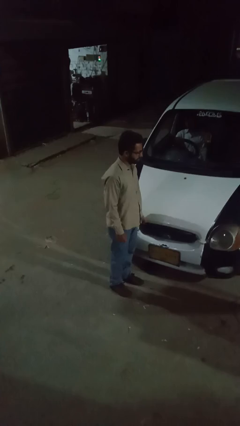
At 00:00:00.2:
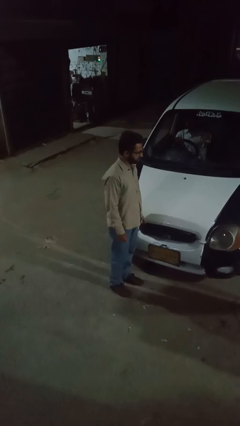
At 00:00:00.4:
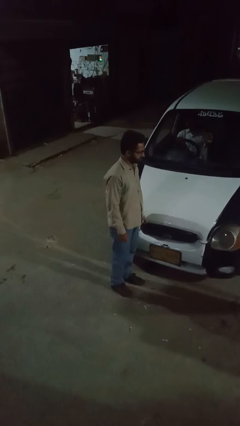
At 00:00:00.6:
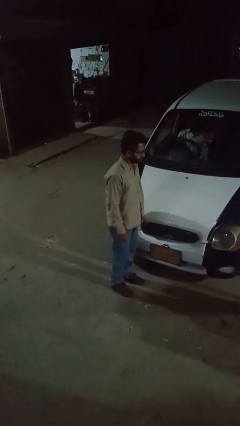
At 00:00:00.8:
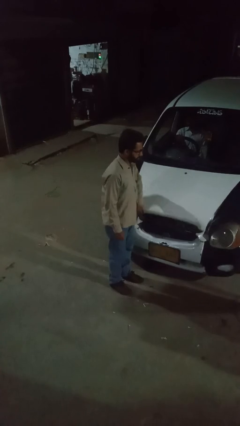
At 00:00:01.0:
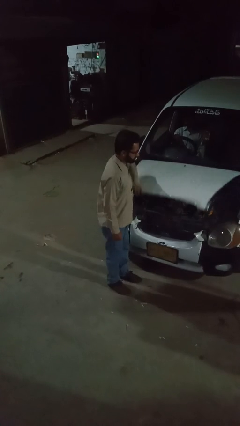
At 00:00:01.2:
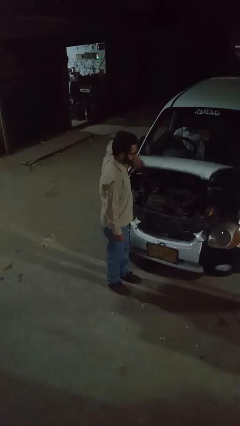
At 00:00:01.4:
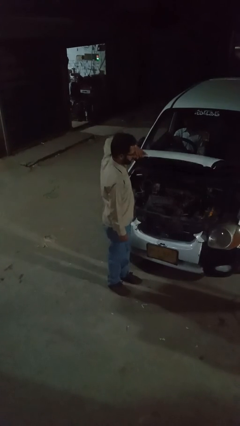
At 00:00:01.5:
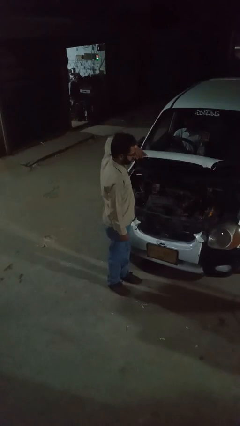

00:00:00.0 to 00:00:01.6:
person opens car hood

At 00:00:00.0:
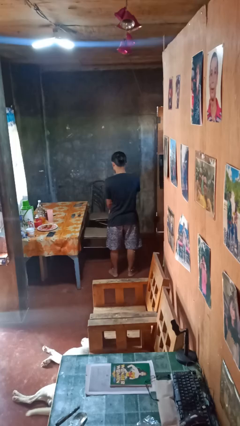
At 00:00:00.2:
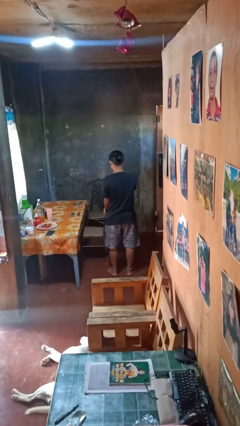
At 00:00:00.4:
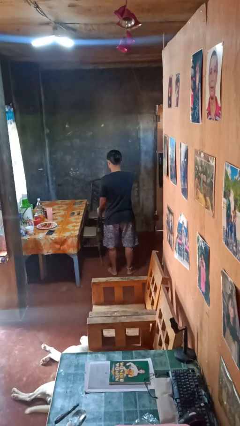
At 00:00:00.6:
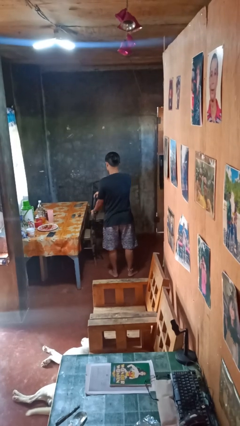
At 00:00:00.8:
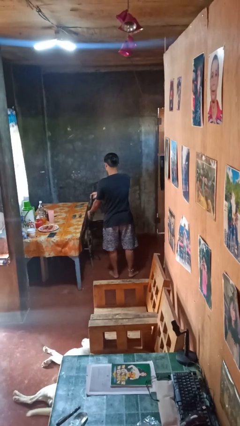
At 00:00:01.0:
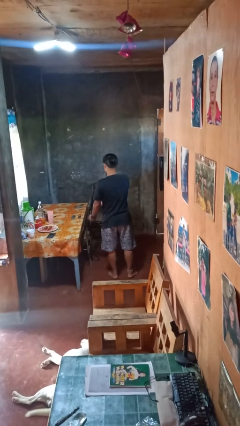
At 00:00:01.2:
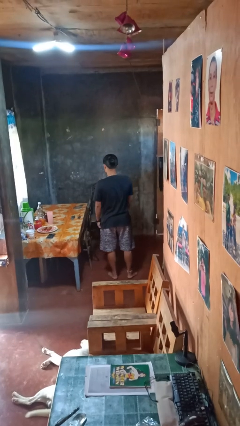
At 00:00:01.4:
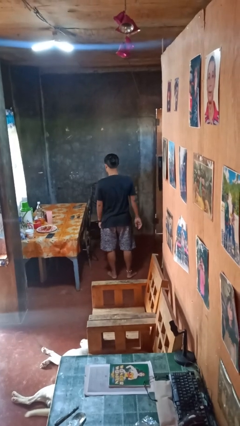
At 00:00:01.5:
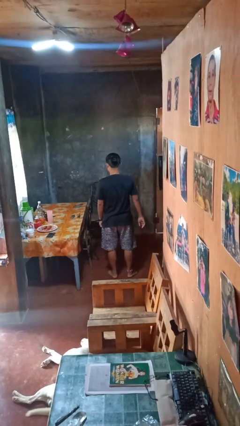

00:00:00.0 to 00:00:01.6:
person pushes in chair

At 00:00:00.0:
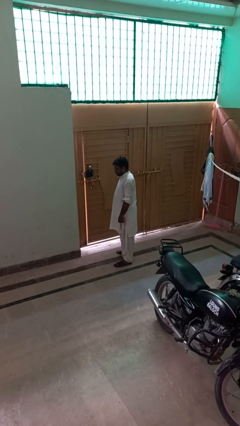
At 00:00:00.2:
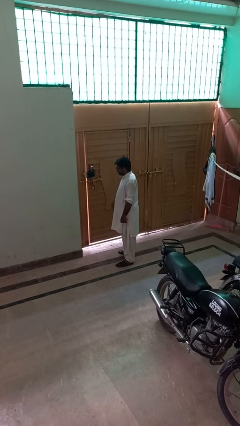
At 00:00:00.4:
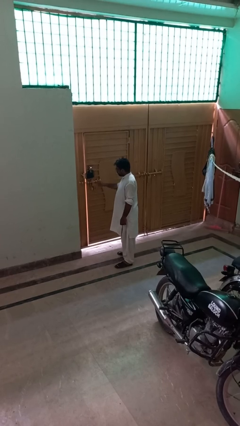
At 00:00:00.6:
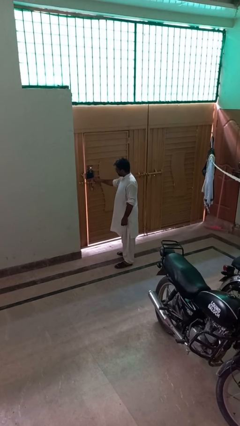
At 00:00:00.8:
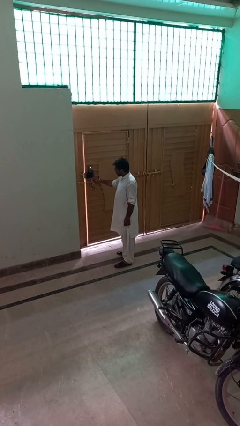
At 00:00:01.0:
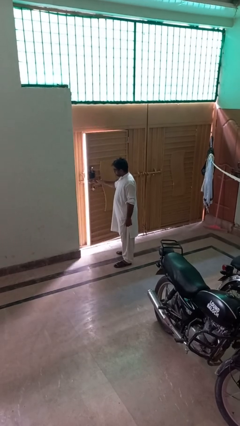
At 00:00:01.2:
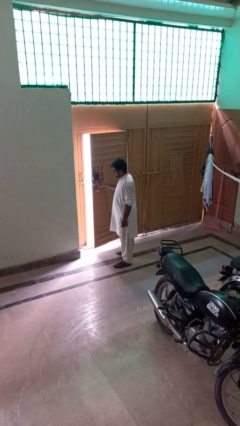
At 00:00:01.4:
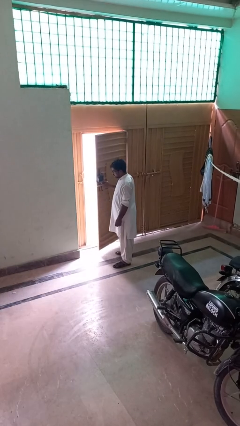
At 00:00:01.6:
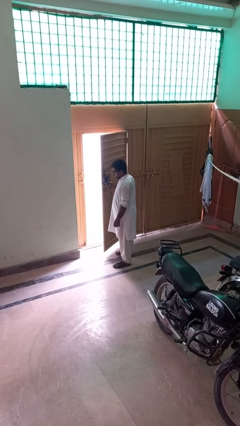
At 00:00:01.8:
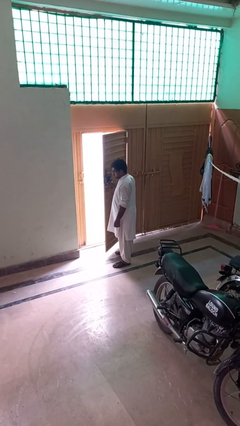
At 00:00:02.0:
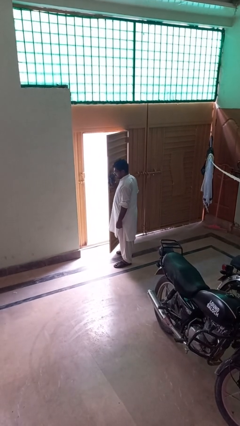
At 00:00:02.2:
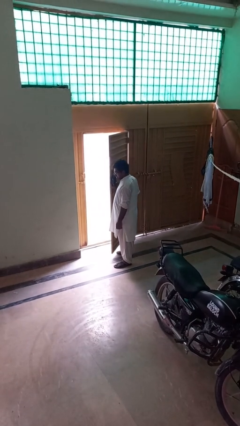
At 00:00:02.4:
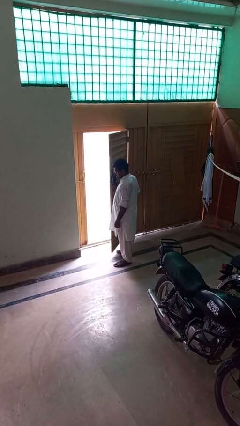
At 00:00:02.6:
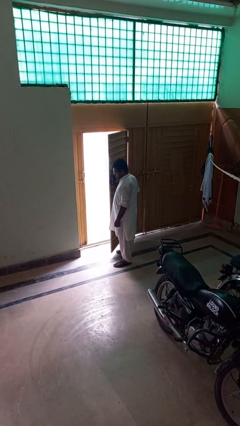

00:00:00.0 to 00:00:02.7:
person opens gate

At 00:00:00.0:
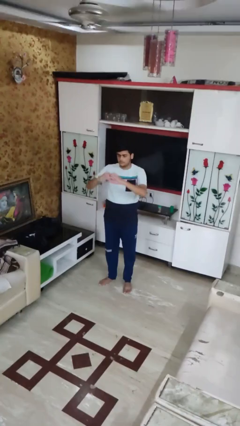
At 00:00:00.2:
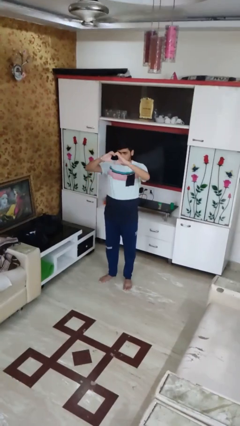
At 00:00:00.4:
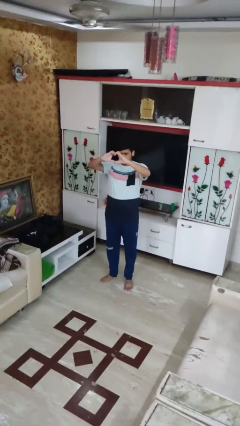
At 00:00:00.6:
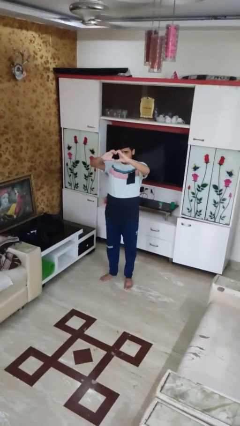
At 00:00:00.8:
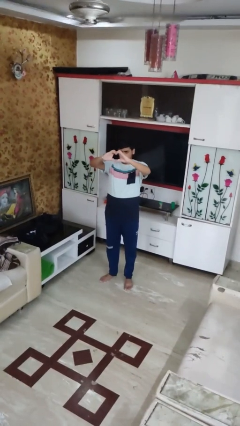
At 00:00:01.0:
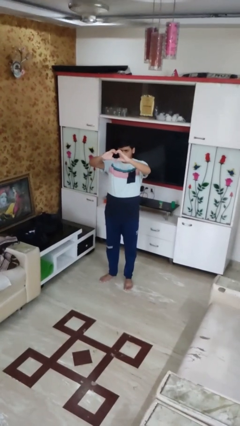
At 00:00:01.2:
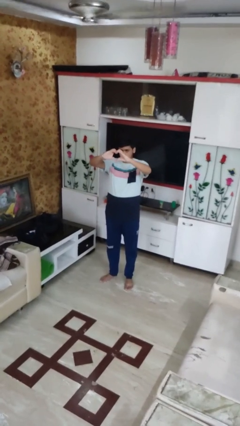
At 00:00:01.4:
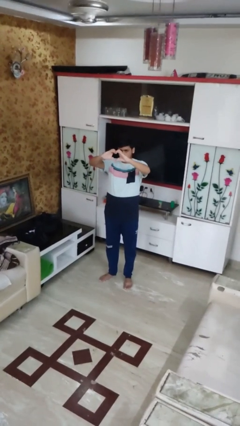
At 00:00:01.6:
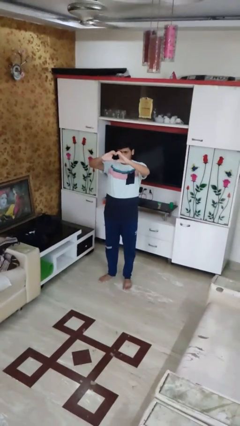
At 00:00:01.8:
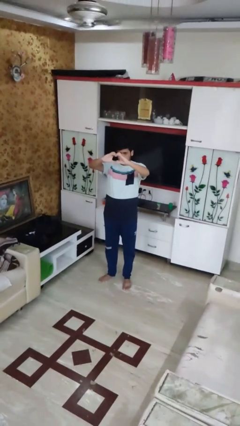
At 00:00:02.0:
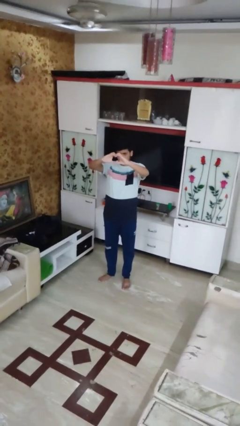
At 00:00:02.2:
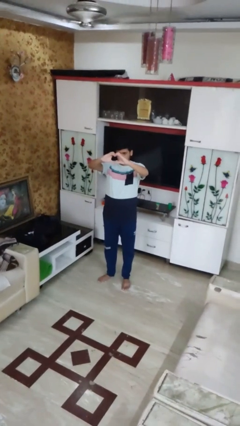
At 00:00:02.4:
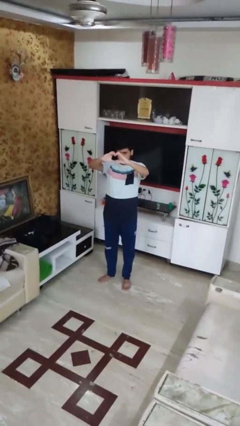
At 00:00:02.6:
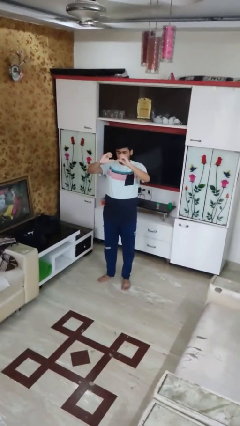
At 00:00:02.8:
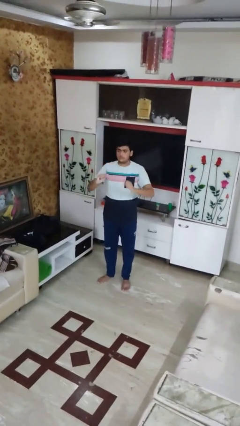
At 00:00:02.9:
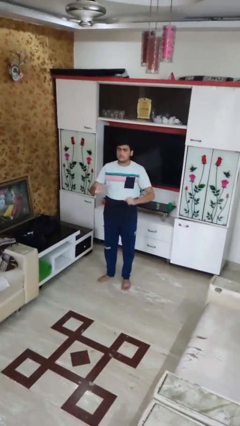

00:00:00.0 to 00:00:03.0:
person gestures heart

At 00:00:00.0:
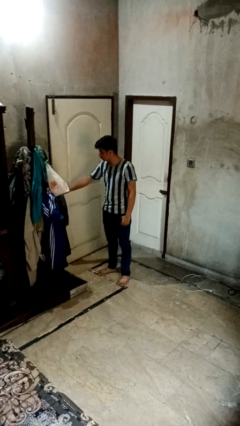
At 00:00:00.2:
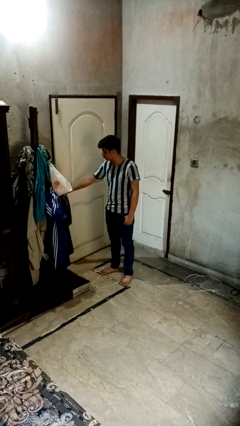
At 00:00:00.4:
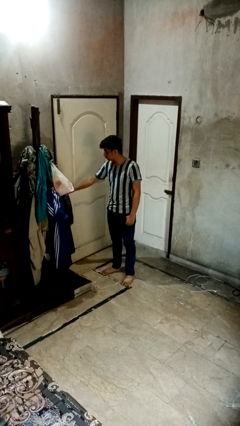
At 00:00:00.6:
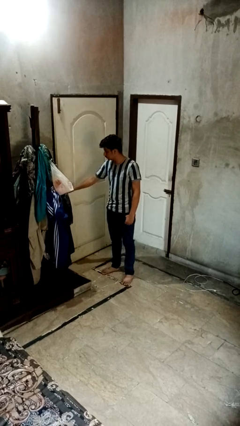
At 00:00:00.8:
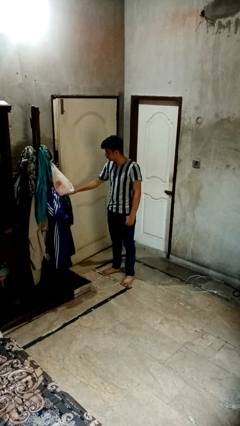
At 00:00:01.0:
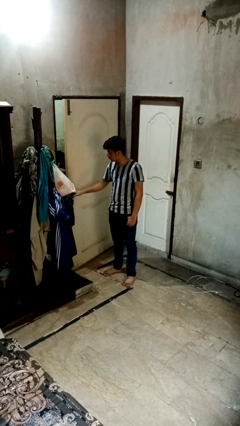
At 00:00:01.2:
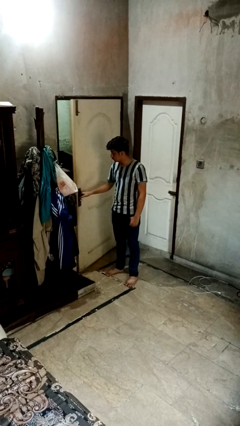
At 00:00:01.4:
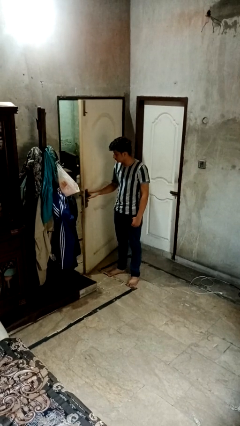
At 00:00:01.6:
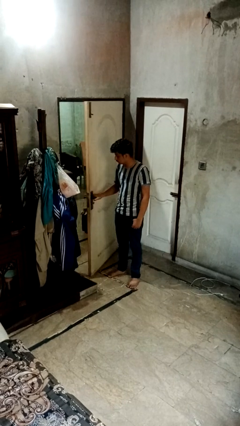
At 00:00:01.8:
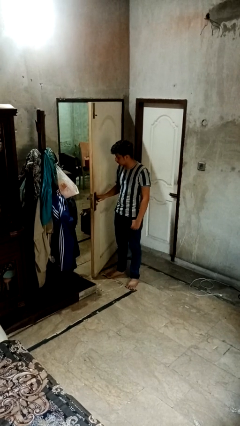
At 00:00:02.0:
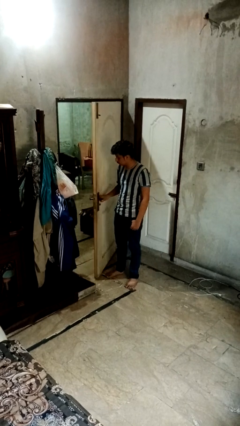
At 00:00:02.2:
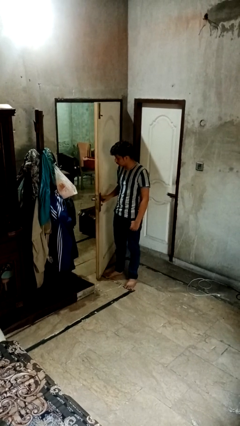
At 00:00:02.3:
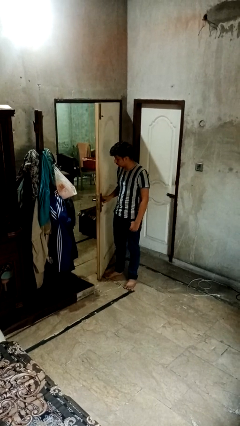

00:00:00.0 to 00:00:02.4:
person opens sliding door

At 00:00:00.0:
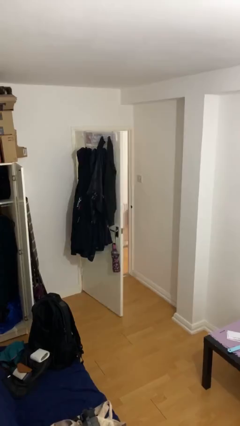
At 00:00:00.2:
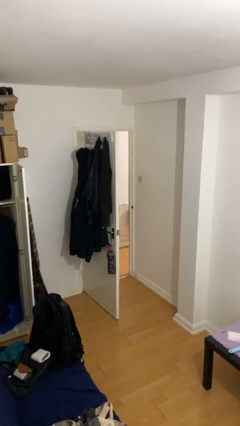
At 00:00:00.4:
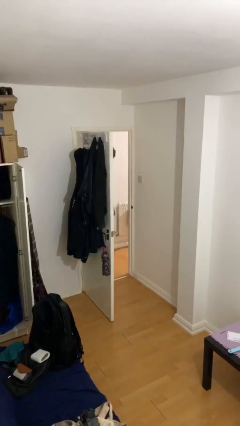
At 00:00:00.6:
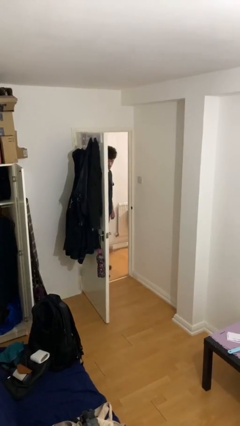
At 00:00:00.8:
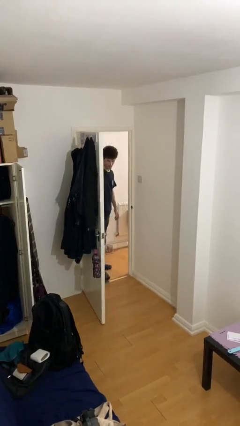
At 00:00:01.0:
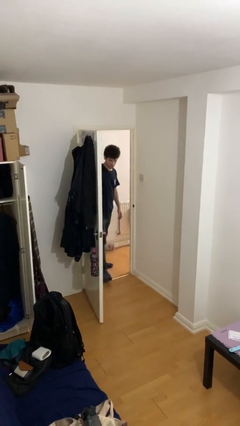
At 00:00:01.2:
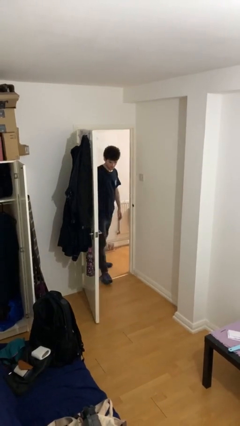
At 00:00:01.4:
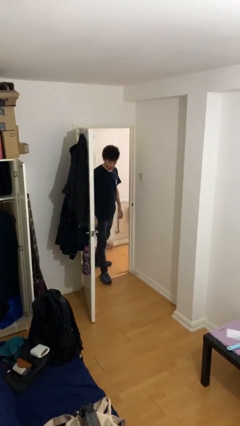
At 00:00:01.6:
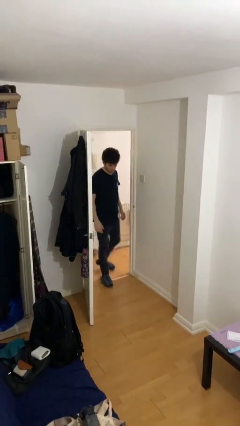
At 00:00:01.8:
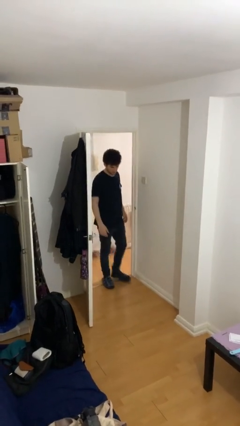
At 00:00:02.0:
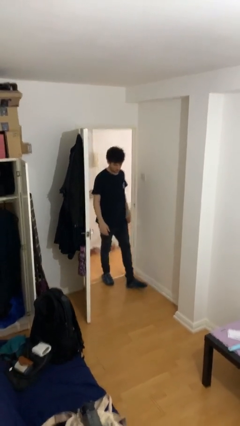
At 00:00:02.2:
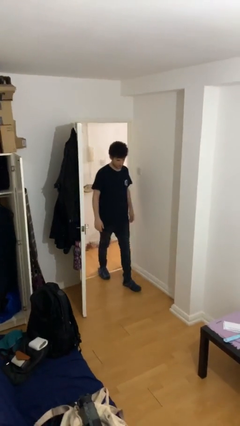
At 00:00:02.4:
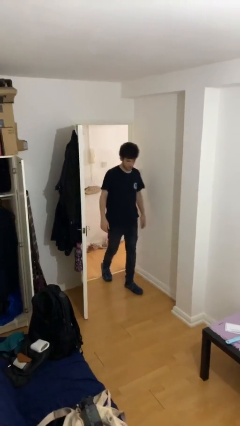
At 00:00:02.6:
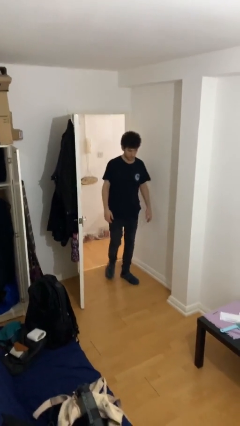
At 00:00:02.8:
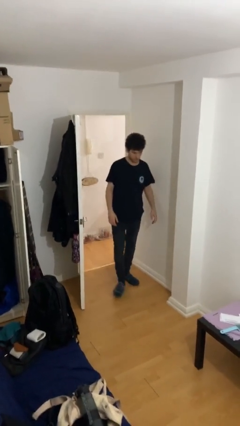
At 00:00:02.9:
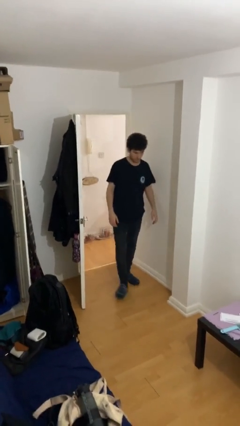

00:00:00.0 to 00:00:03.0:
person enters scene through structure

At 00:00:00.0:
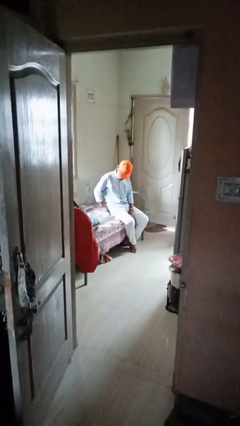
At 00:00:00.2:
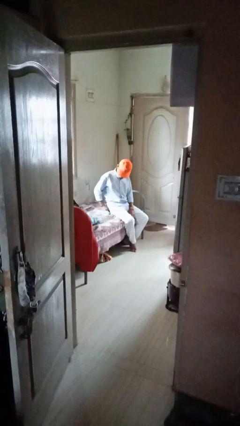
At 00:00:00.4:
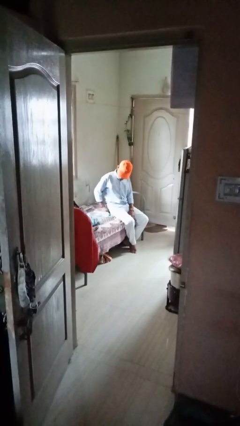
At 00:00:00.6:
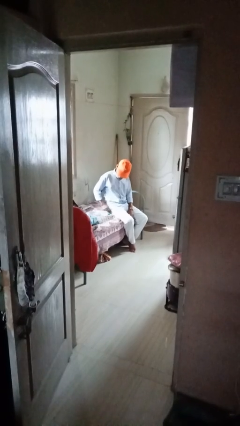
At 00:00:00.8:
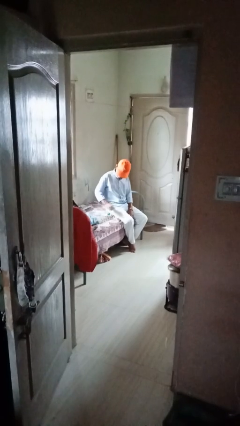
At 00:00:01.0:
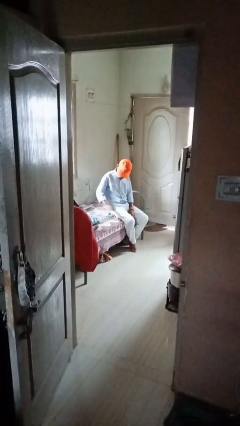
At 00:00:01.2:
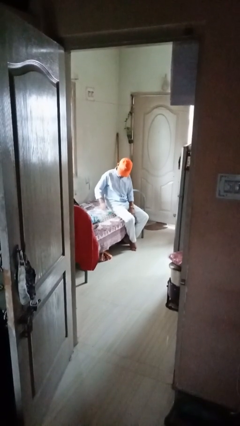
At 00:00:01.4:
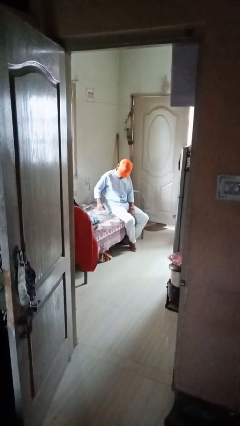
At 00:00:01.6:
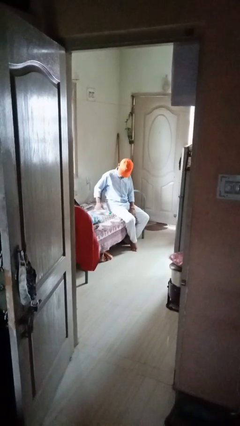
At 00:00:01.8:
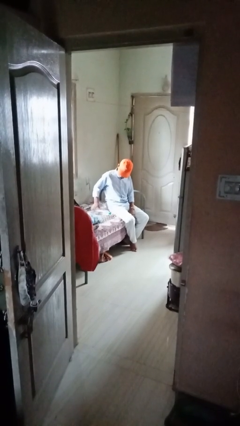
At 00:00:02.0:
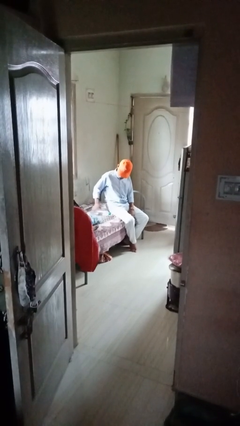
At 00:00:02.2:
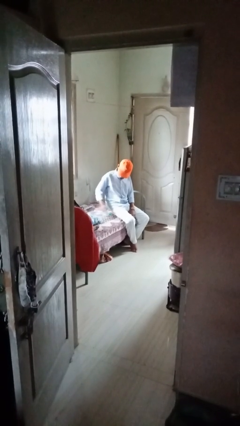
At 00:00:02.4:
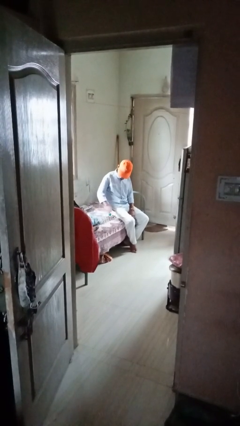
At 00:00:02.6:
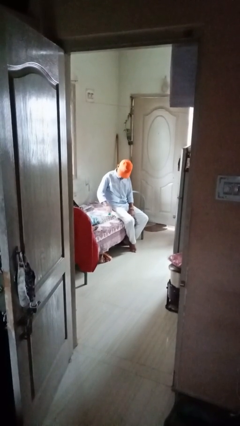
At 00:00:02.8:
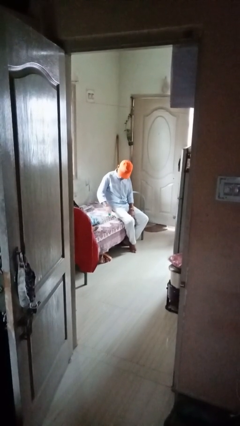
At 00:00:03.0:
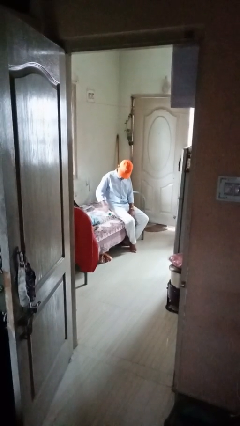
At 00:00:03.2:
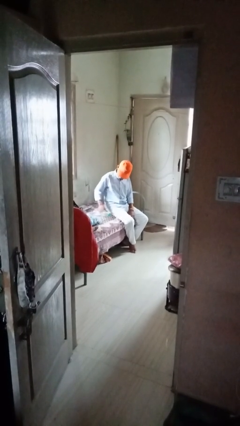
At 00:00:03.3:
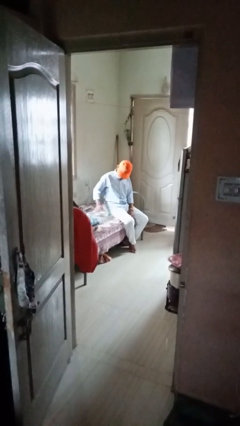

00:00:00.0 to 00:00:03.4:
person waves hand over object
